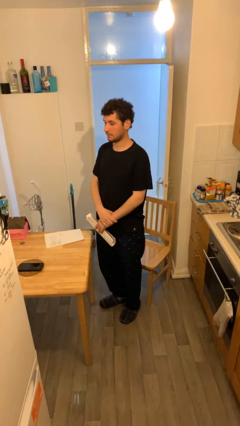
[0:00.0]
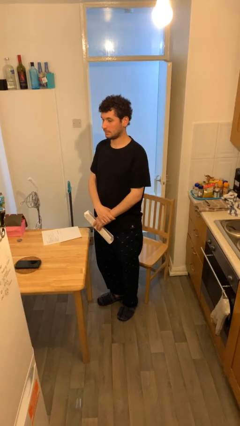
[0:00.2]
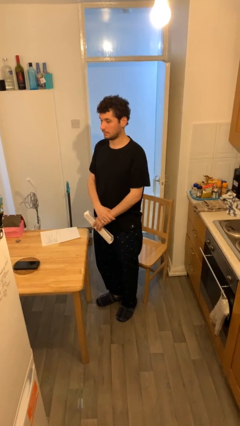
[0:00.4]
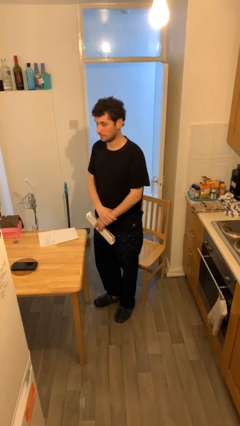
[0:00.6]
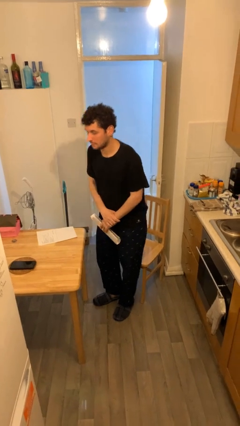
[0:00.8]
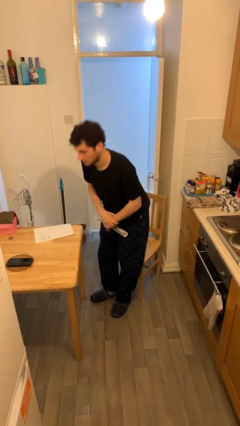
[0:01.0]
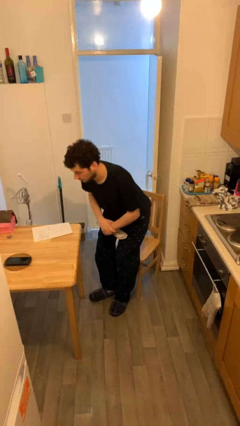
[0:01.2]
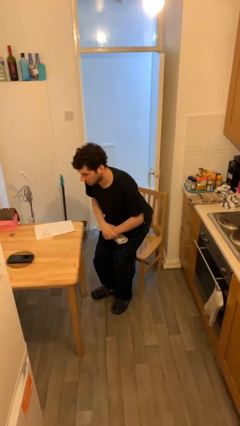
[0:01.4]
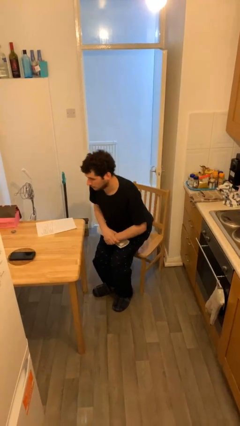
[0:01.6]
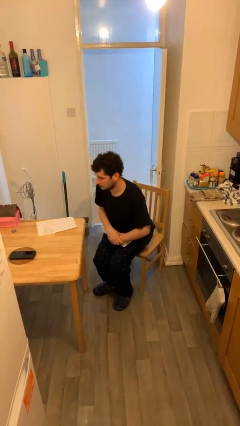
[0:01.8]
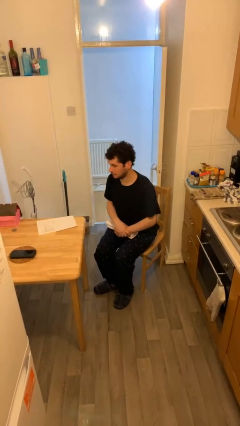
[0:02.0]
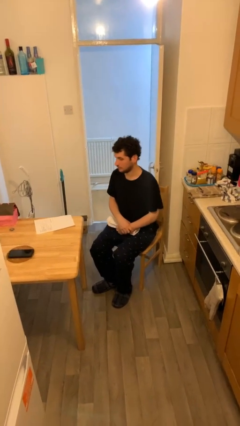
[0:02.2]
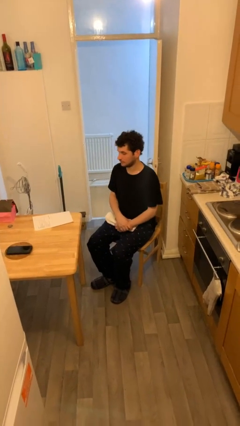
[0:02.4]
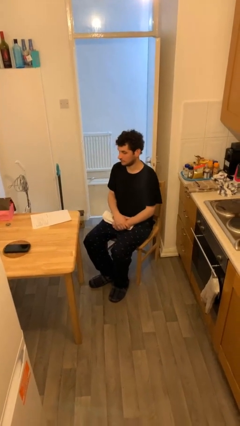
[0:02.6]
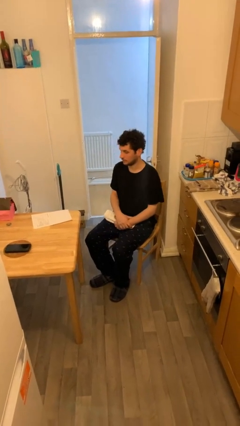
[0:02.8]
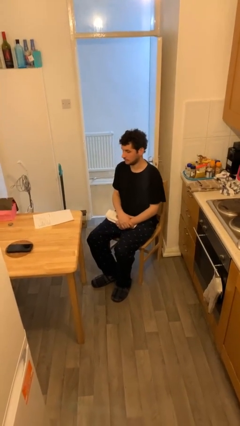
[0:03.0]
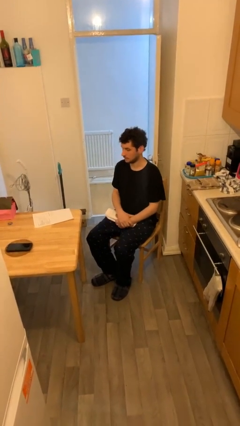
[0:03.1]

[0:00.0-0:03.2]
person sits down

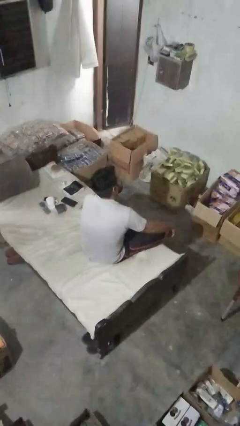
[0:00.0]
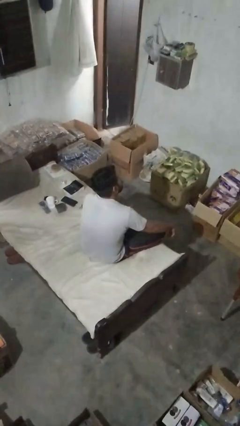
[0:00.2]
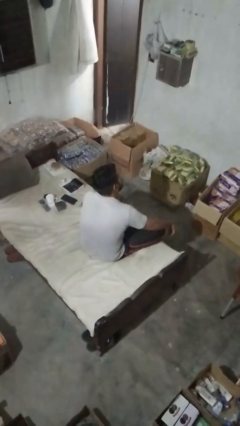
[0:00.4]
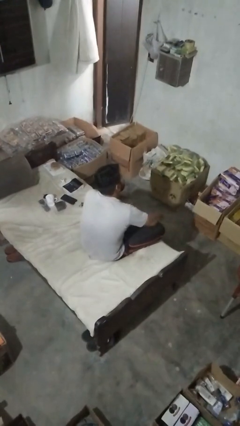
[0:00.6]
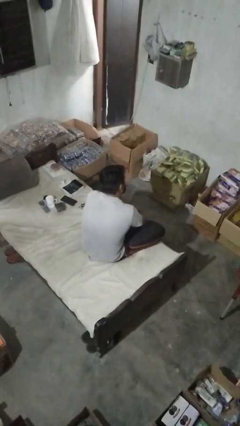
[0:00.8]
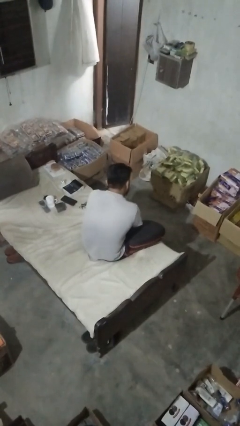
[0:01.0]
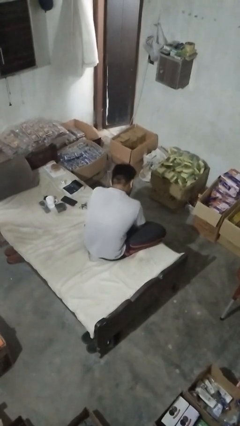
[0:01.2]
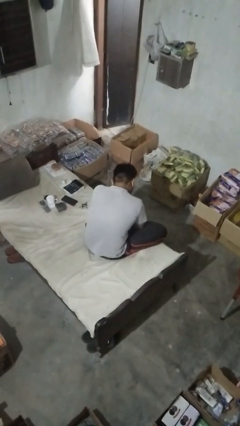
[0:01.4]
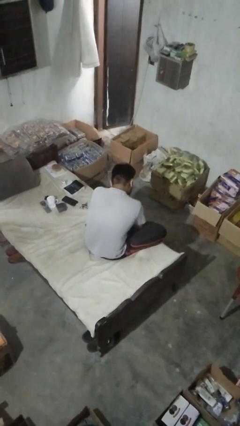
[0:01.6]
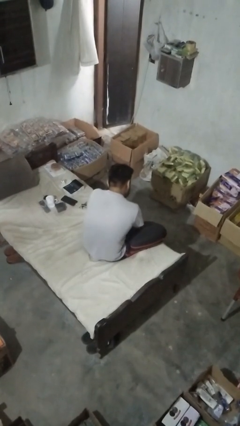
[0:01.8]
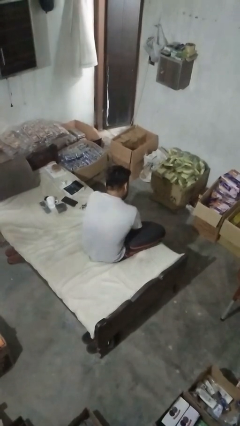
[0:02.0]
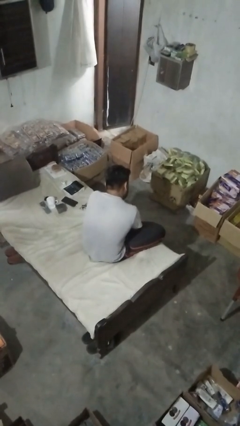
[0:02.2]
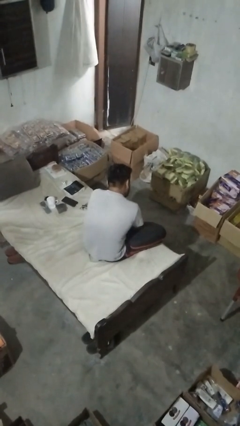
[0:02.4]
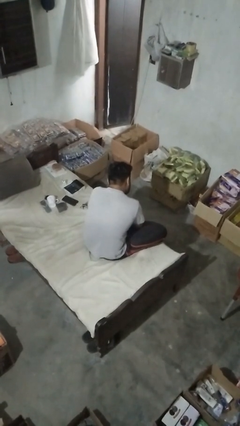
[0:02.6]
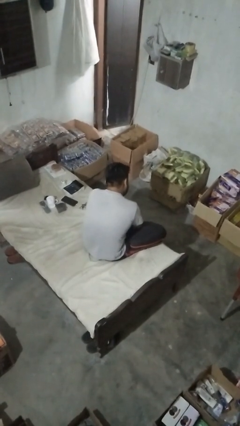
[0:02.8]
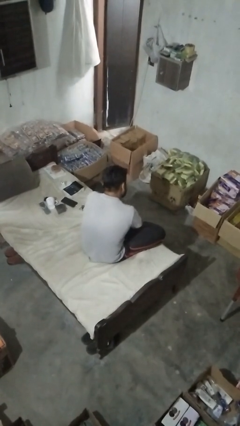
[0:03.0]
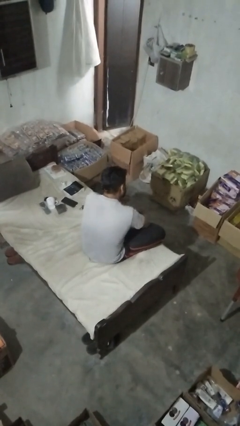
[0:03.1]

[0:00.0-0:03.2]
person rubs foot

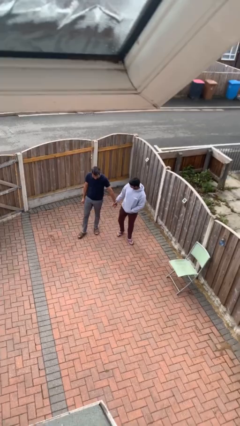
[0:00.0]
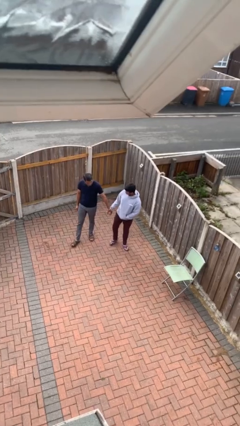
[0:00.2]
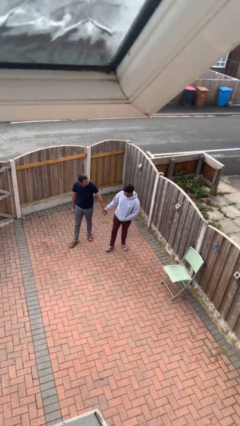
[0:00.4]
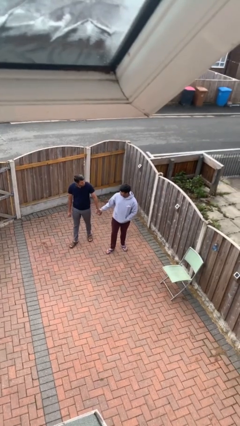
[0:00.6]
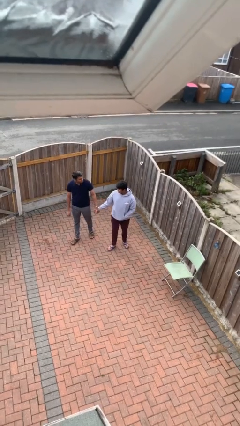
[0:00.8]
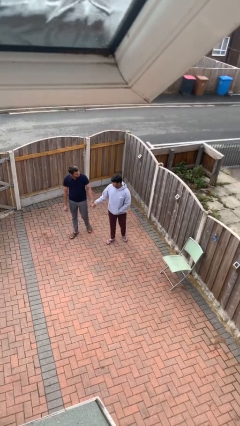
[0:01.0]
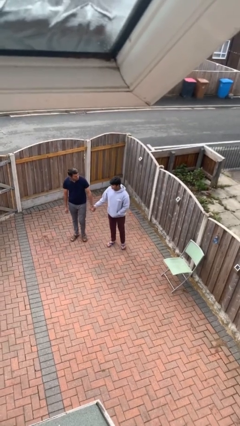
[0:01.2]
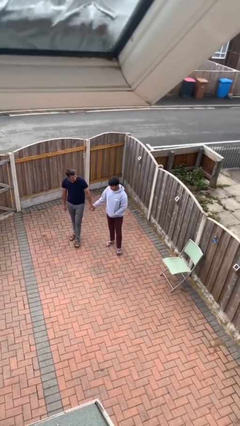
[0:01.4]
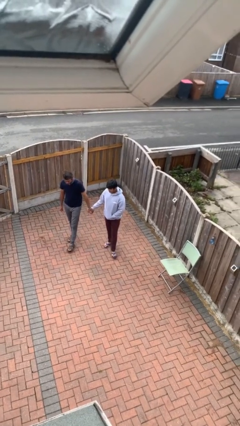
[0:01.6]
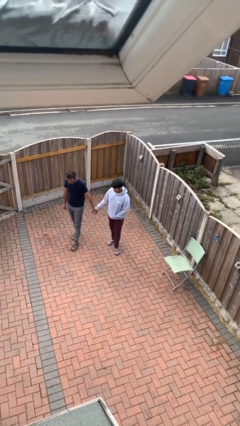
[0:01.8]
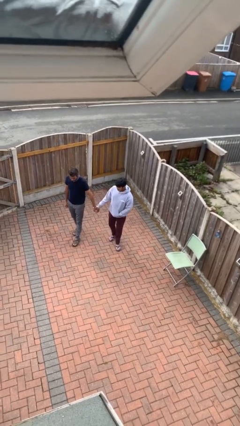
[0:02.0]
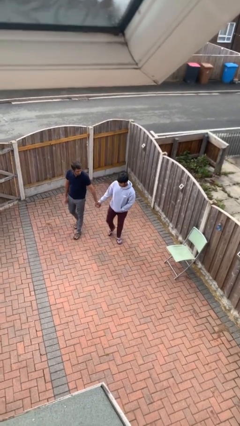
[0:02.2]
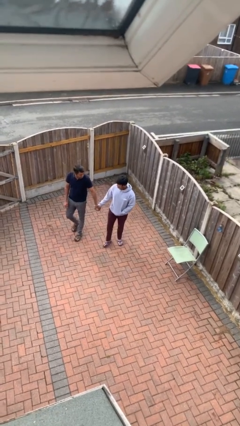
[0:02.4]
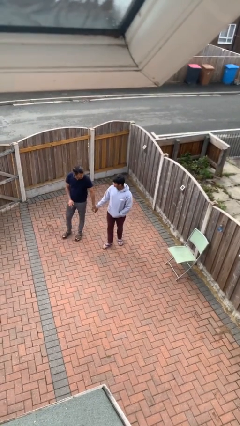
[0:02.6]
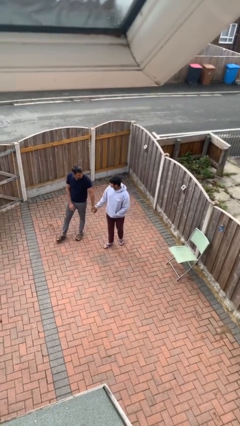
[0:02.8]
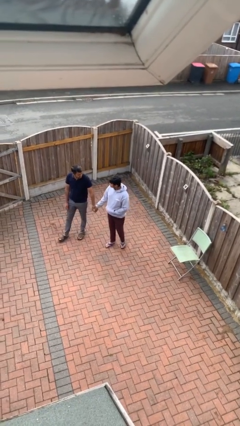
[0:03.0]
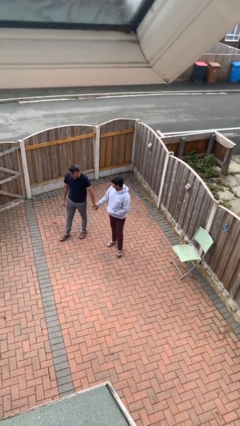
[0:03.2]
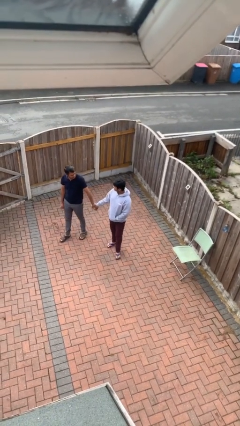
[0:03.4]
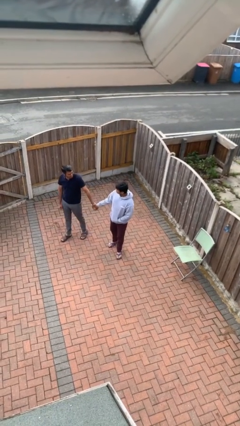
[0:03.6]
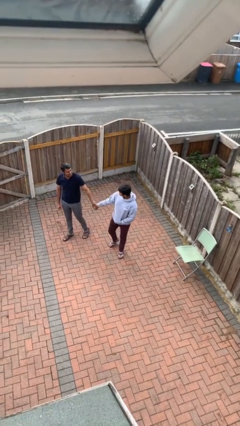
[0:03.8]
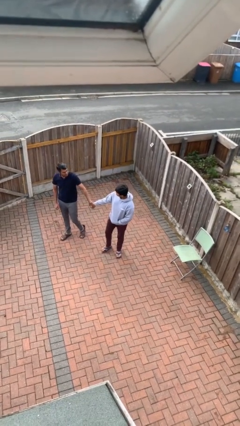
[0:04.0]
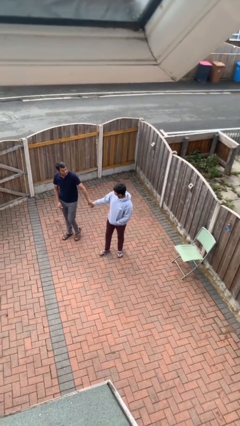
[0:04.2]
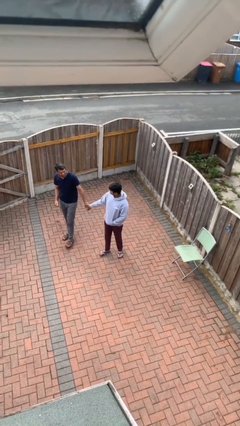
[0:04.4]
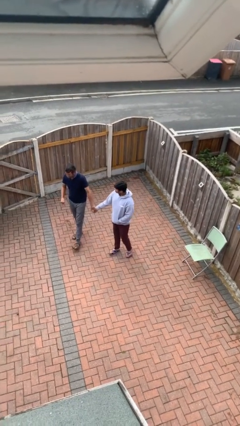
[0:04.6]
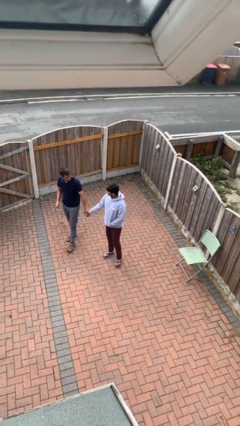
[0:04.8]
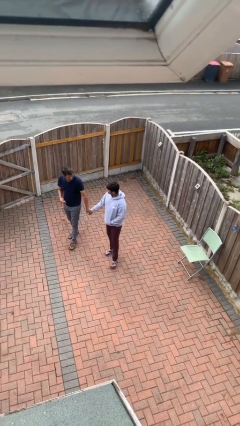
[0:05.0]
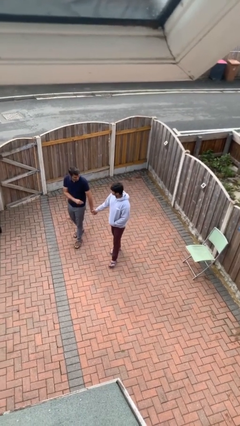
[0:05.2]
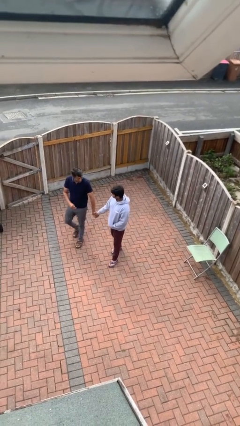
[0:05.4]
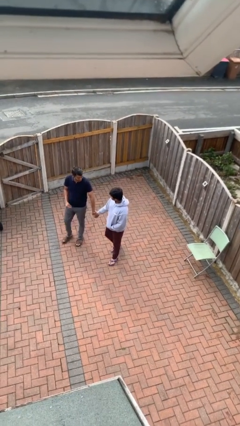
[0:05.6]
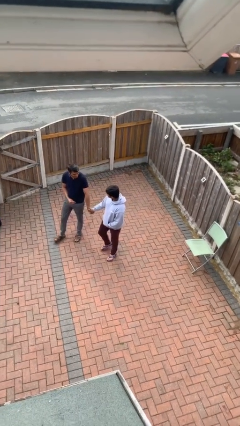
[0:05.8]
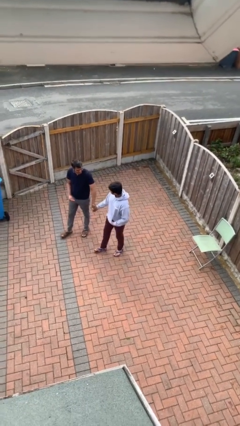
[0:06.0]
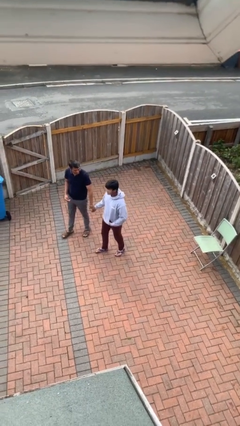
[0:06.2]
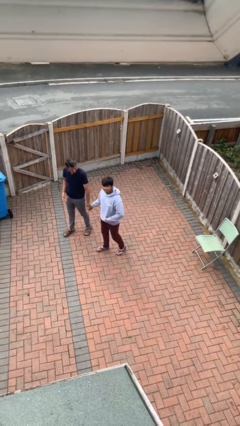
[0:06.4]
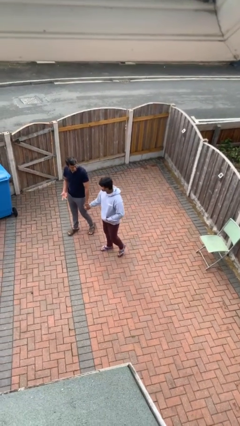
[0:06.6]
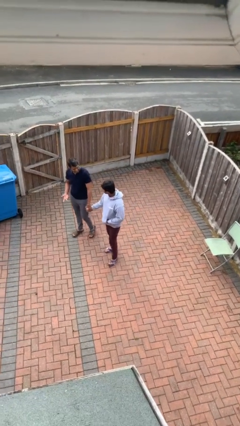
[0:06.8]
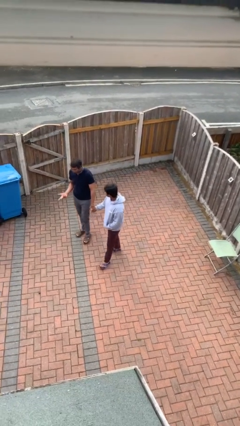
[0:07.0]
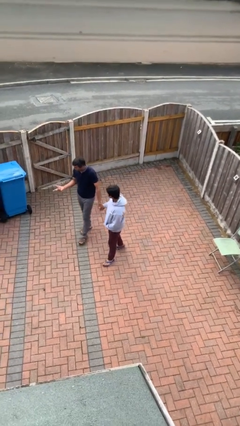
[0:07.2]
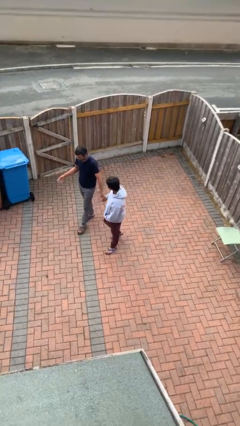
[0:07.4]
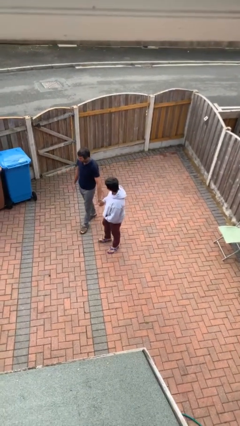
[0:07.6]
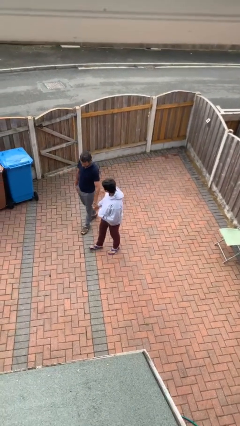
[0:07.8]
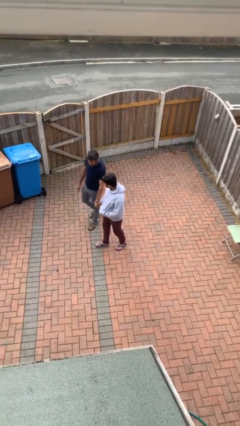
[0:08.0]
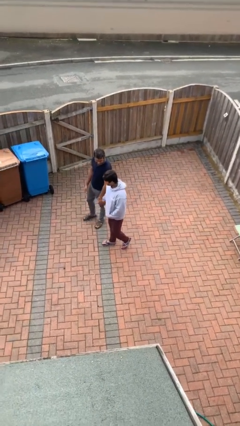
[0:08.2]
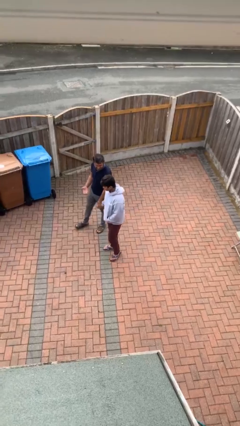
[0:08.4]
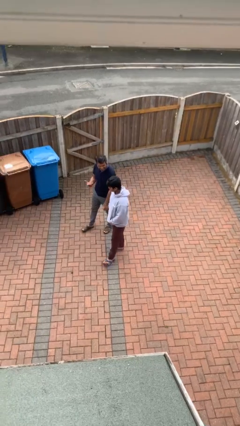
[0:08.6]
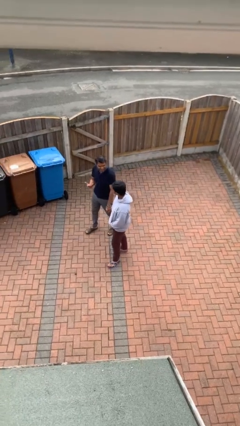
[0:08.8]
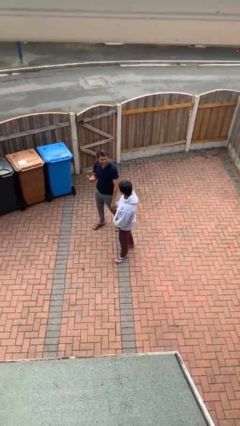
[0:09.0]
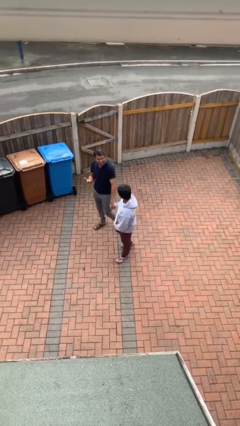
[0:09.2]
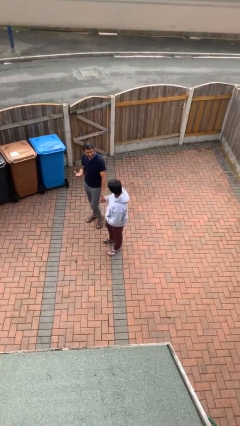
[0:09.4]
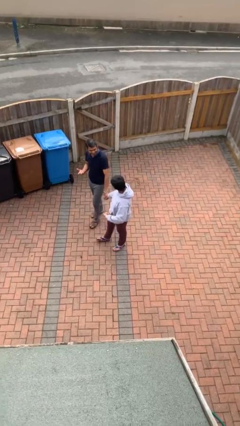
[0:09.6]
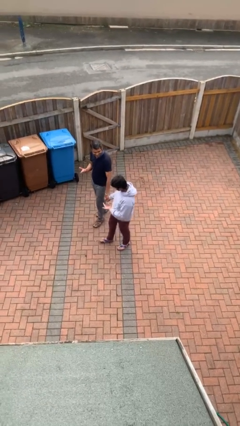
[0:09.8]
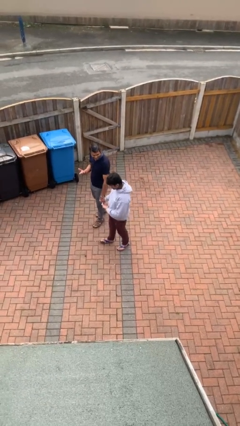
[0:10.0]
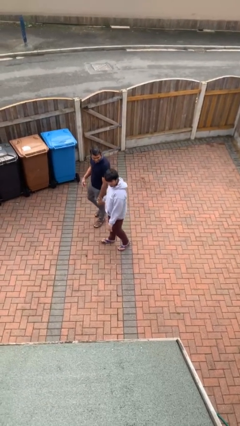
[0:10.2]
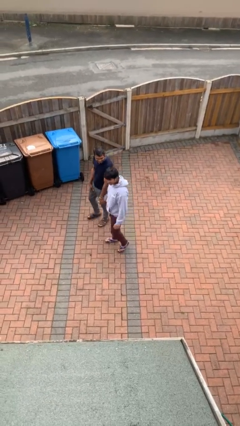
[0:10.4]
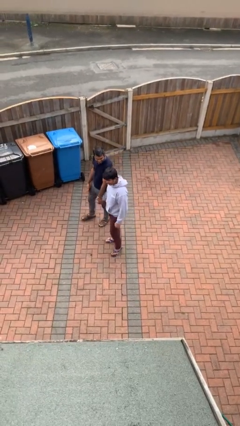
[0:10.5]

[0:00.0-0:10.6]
person holds hand

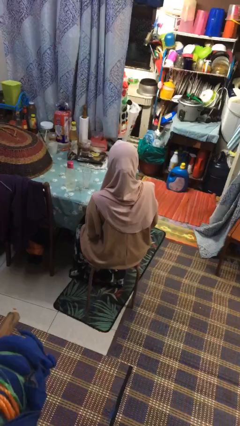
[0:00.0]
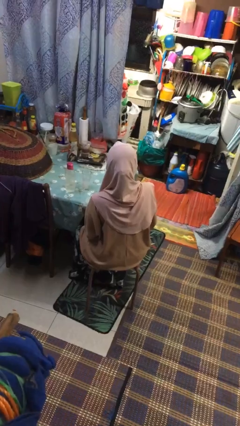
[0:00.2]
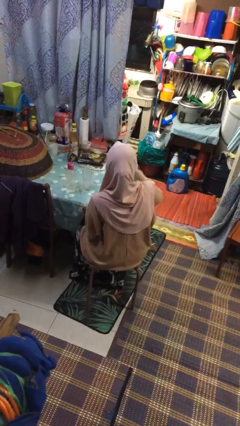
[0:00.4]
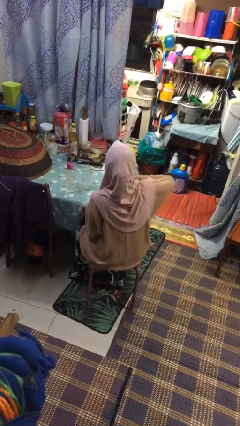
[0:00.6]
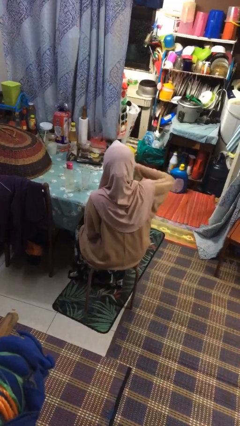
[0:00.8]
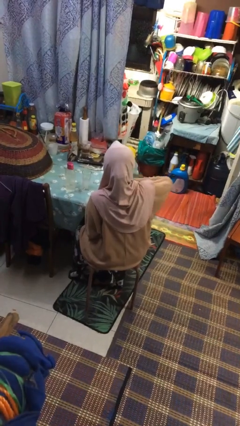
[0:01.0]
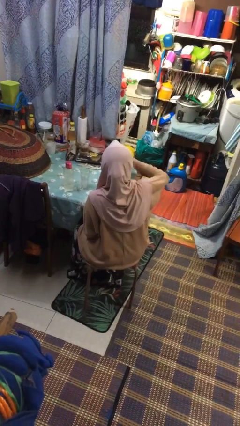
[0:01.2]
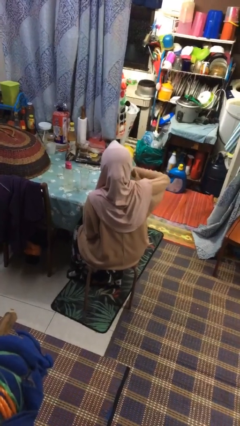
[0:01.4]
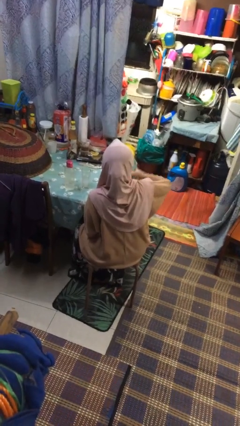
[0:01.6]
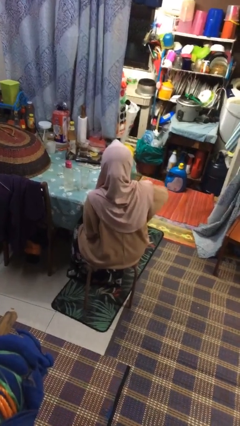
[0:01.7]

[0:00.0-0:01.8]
person drums on chest
